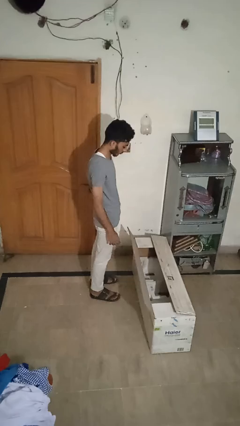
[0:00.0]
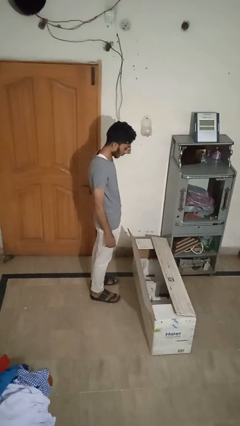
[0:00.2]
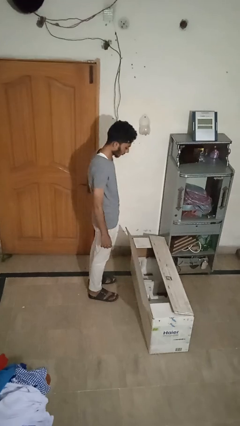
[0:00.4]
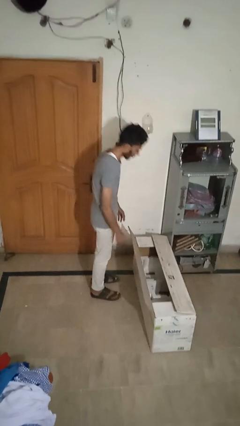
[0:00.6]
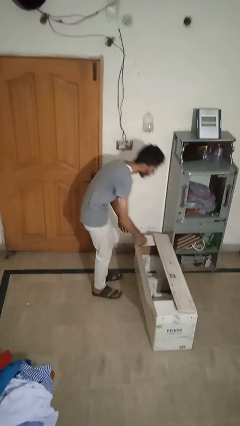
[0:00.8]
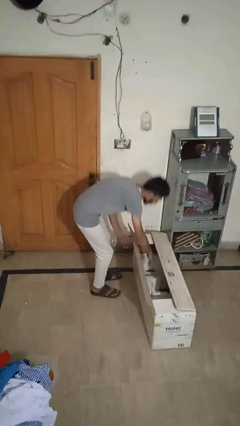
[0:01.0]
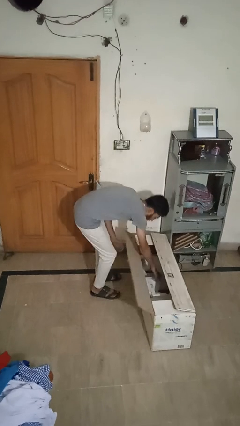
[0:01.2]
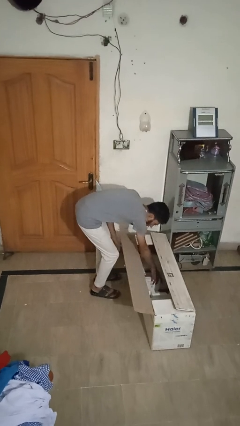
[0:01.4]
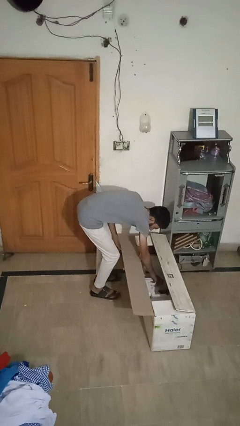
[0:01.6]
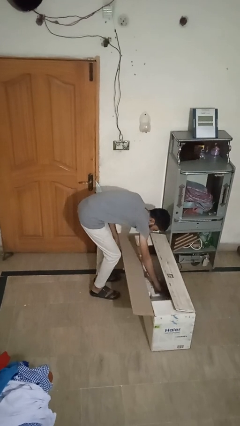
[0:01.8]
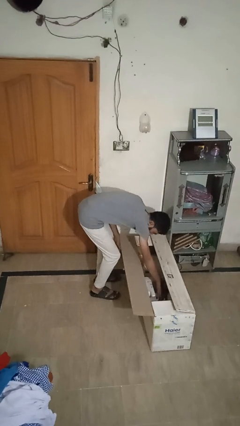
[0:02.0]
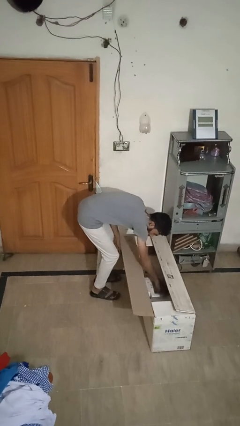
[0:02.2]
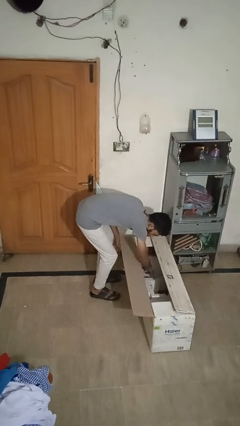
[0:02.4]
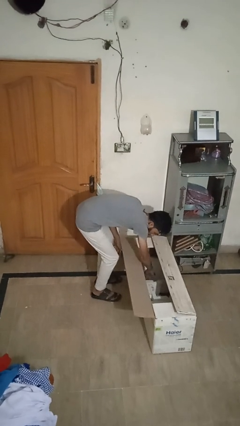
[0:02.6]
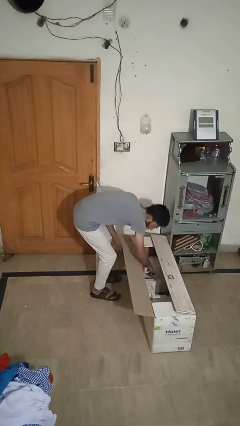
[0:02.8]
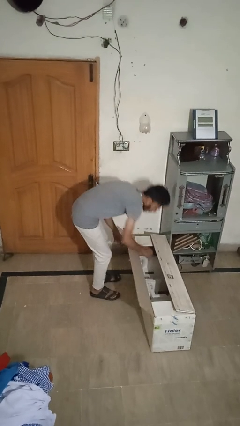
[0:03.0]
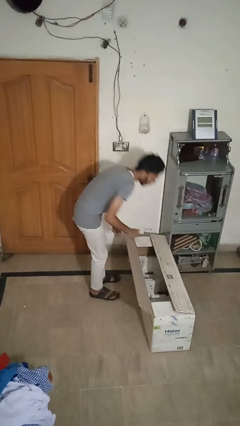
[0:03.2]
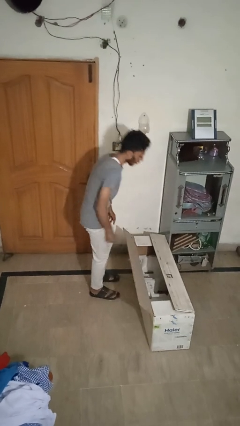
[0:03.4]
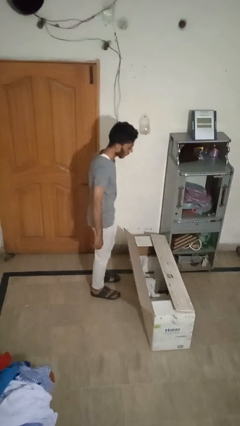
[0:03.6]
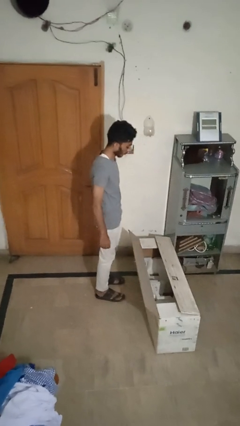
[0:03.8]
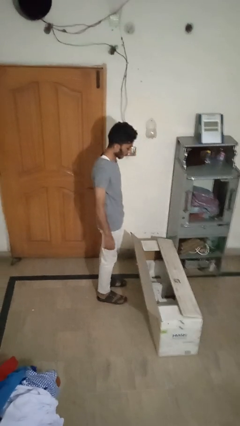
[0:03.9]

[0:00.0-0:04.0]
person searches in box

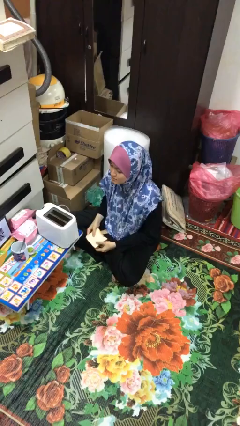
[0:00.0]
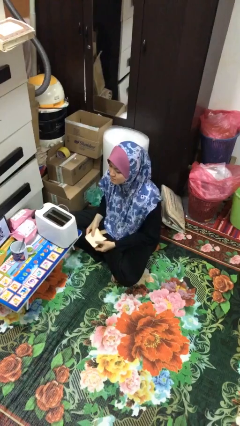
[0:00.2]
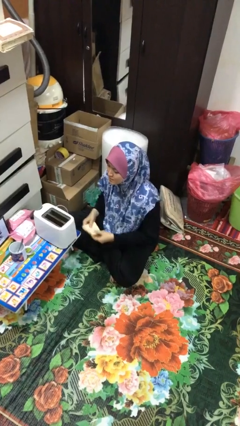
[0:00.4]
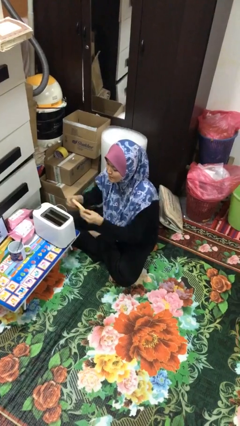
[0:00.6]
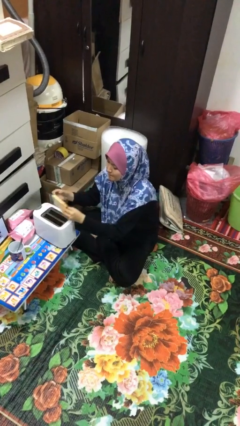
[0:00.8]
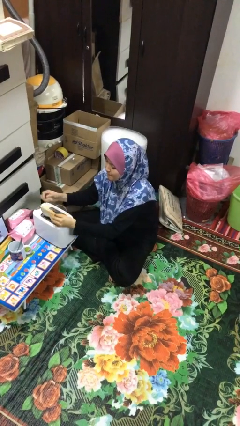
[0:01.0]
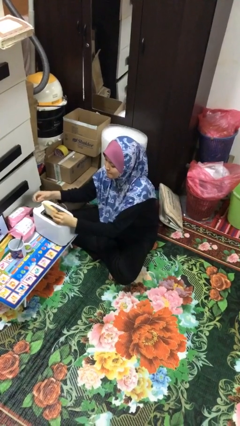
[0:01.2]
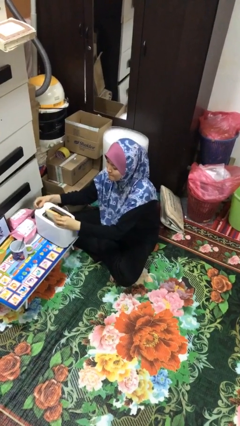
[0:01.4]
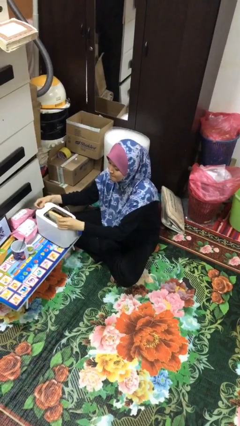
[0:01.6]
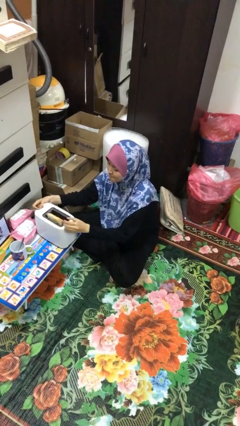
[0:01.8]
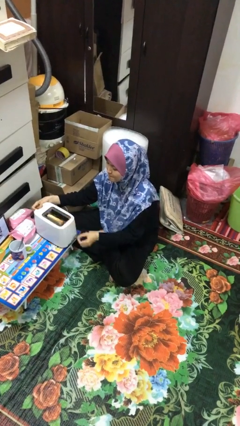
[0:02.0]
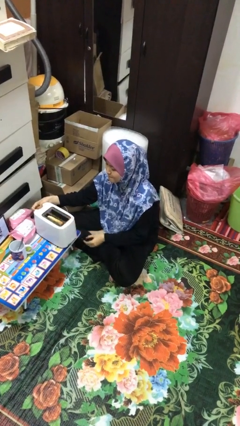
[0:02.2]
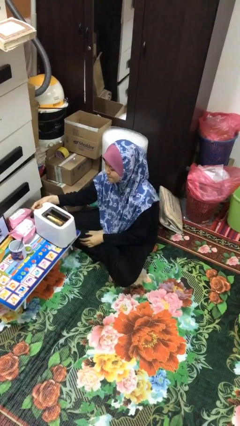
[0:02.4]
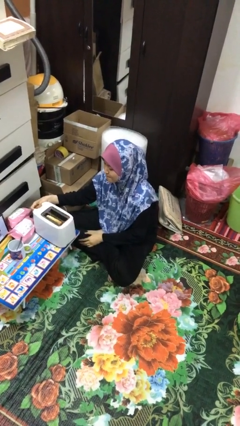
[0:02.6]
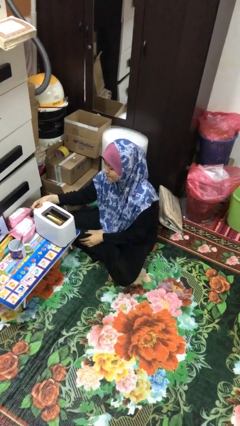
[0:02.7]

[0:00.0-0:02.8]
person puts object into toaster

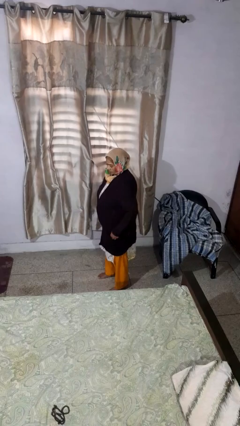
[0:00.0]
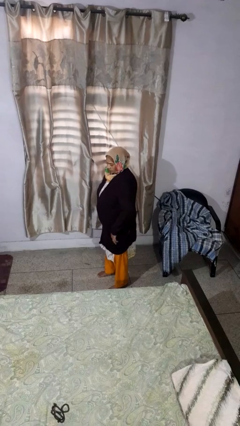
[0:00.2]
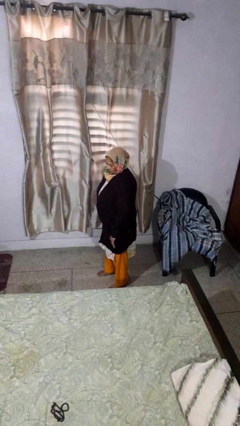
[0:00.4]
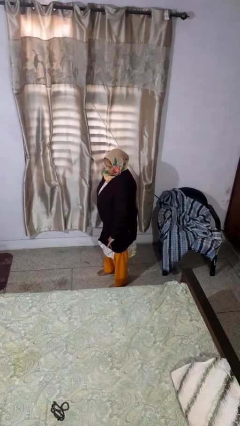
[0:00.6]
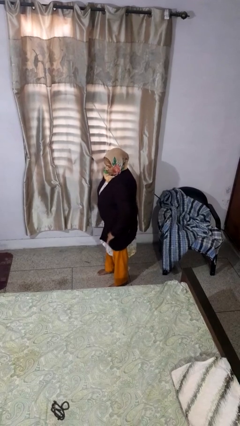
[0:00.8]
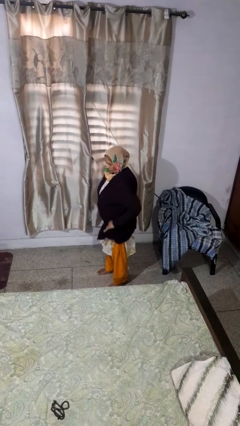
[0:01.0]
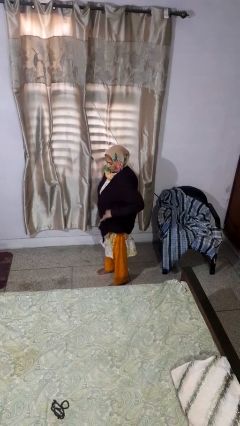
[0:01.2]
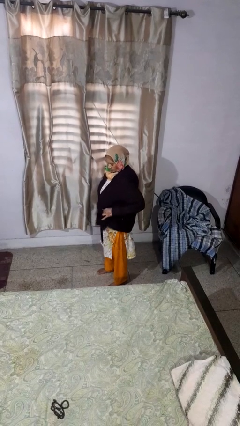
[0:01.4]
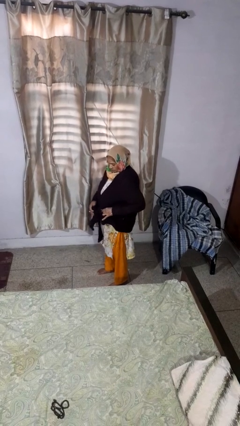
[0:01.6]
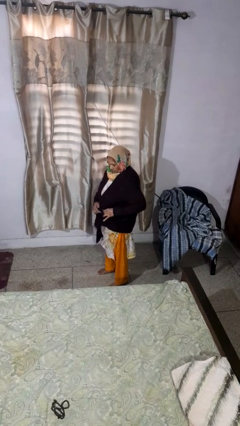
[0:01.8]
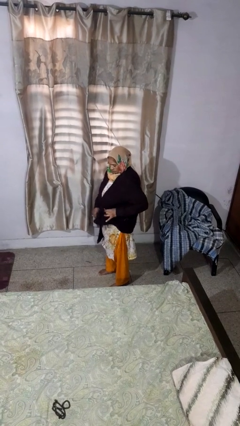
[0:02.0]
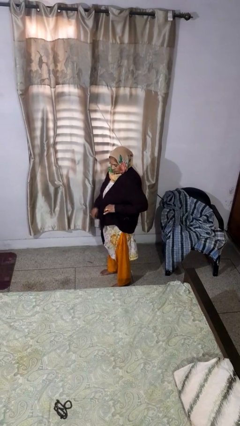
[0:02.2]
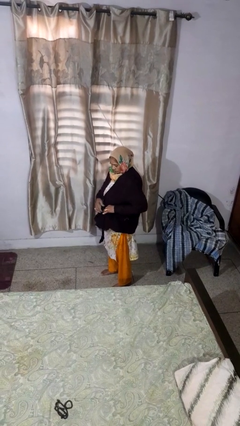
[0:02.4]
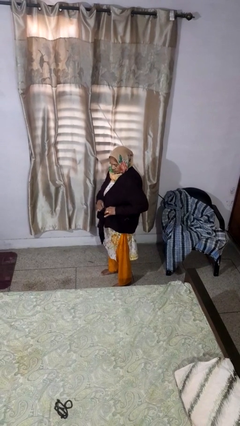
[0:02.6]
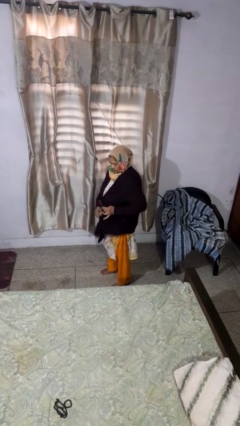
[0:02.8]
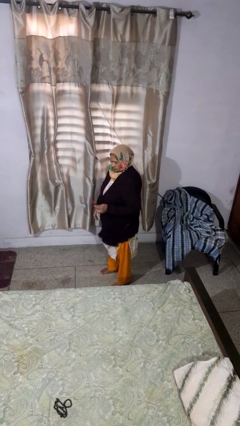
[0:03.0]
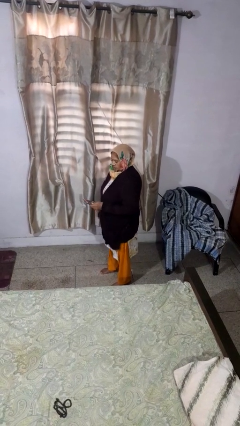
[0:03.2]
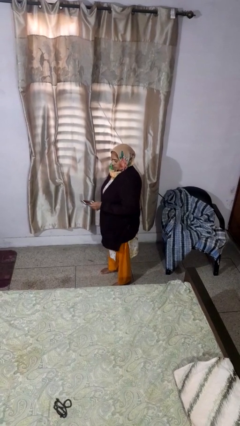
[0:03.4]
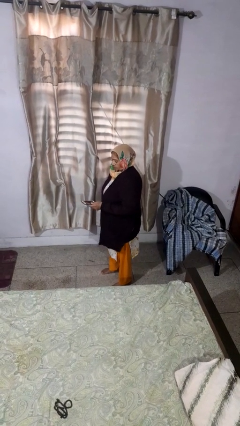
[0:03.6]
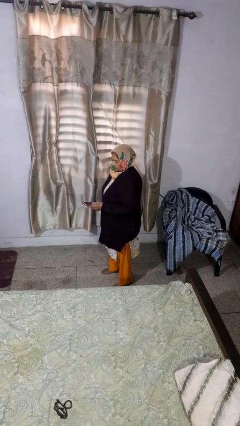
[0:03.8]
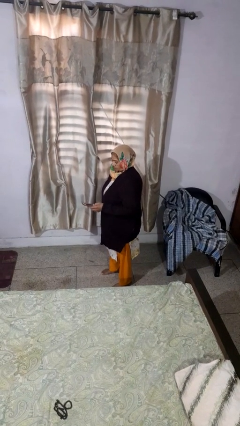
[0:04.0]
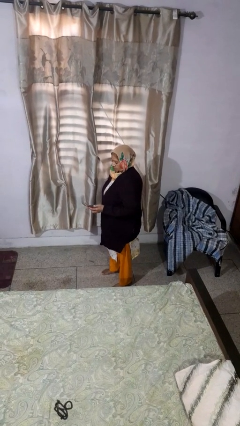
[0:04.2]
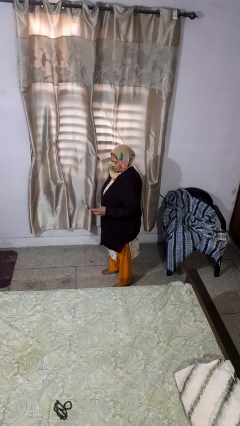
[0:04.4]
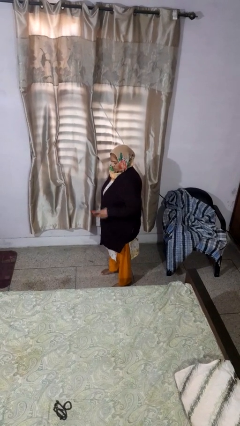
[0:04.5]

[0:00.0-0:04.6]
person takes phone from pocket

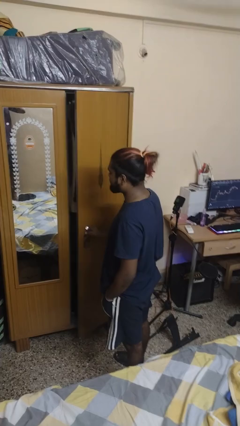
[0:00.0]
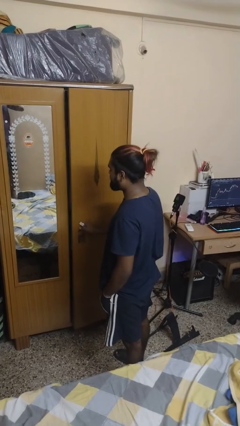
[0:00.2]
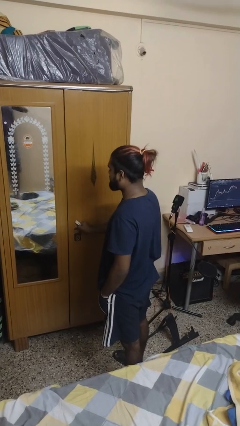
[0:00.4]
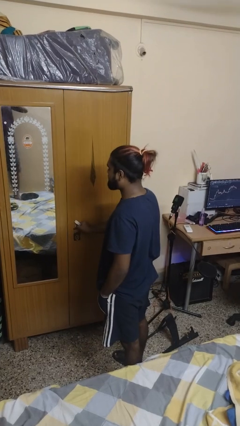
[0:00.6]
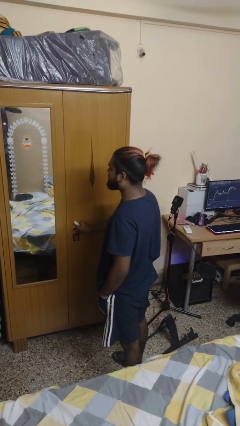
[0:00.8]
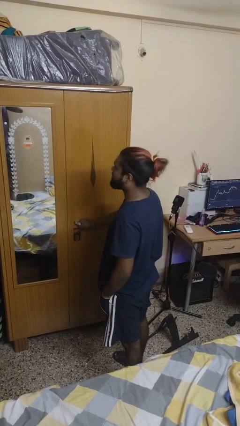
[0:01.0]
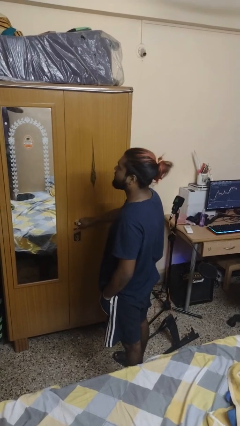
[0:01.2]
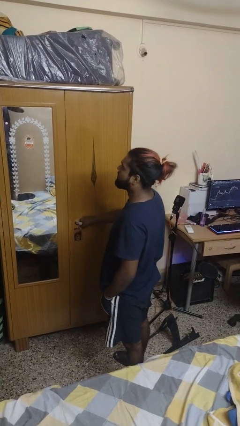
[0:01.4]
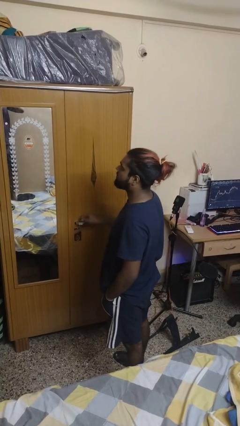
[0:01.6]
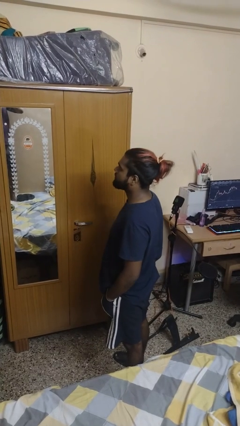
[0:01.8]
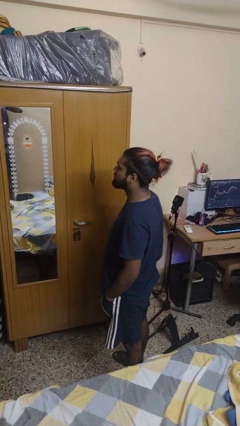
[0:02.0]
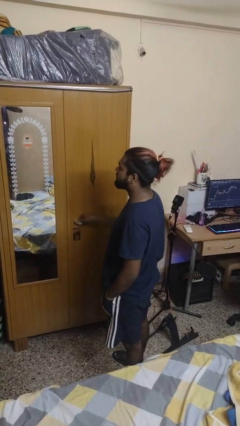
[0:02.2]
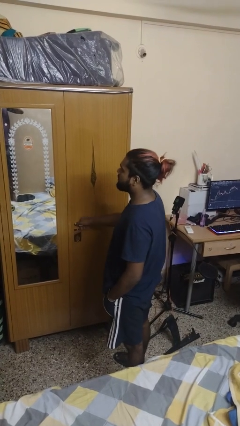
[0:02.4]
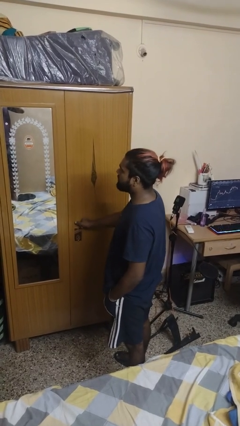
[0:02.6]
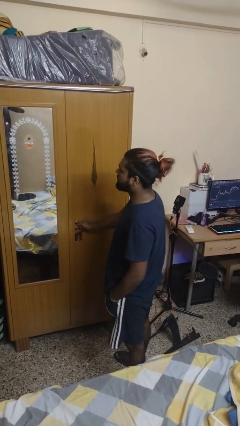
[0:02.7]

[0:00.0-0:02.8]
person closes cabinet

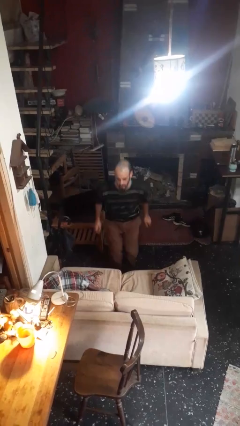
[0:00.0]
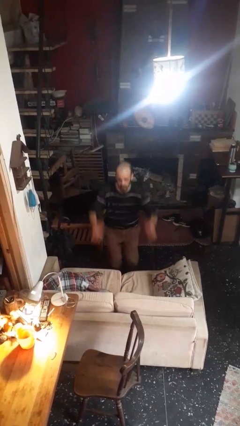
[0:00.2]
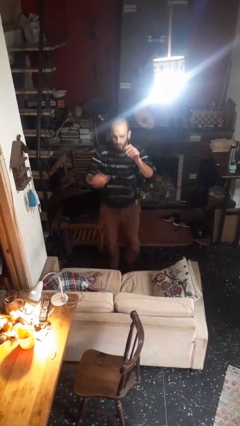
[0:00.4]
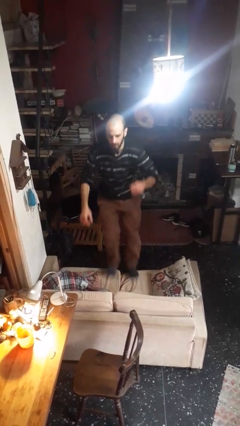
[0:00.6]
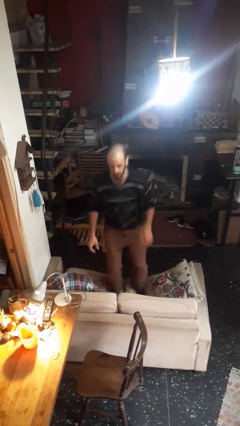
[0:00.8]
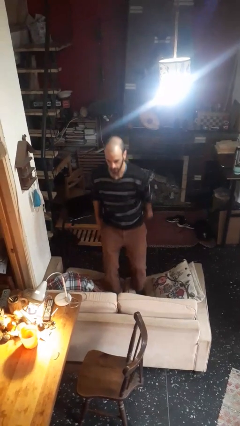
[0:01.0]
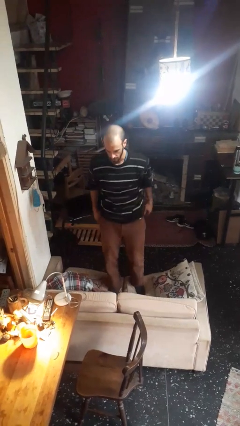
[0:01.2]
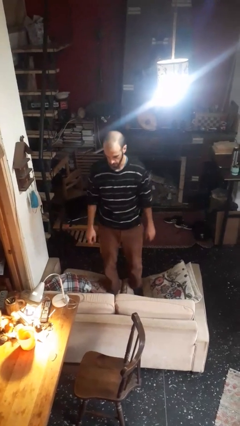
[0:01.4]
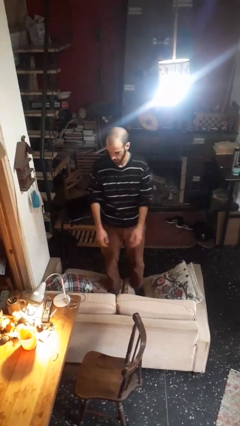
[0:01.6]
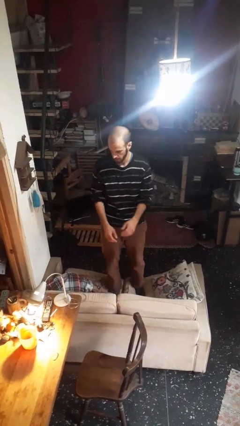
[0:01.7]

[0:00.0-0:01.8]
person climbs on couch

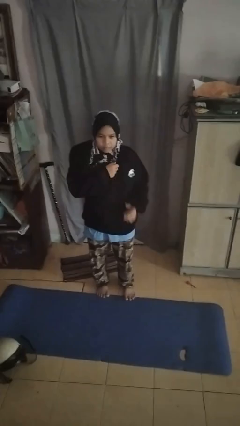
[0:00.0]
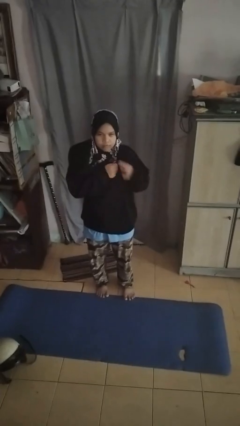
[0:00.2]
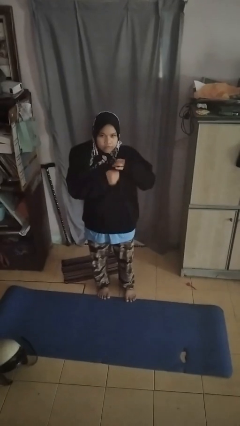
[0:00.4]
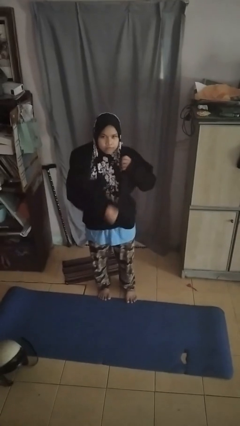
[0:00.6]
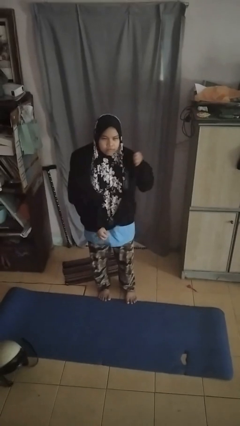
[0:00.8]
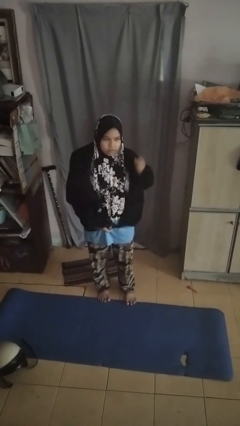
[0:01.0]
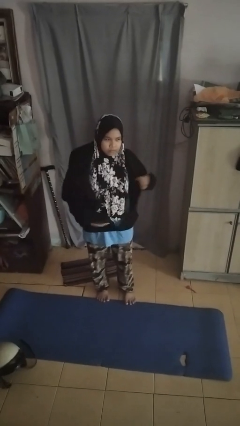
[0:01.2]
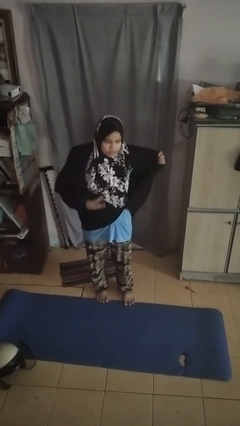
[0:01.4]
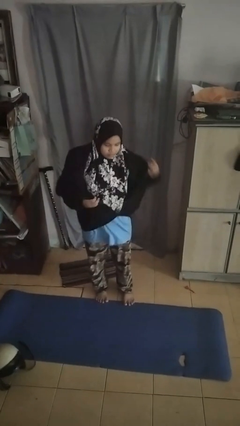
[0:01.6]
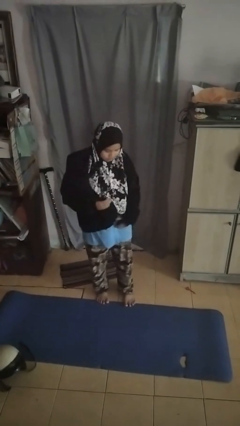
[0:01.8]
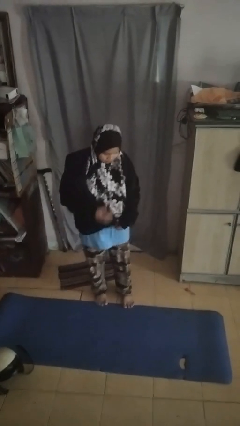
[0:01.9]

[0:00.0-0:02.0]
person unzips jacket
